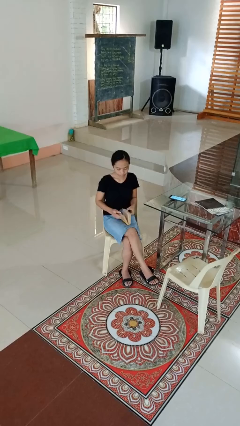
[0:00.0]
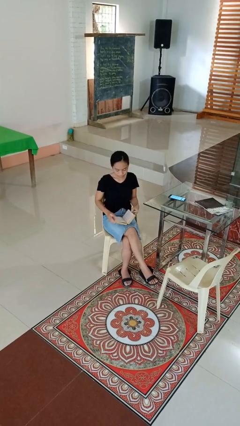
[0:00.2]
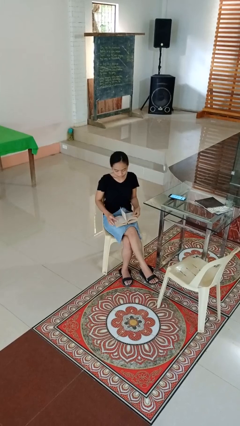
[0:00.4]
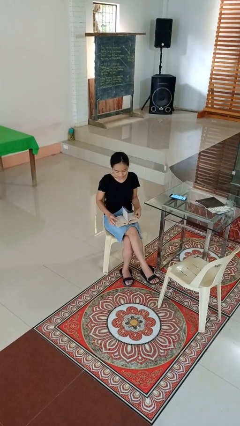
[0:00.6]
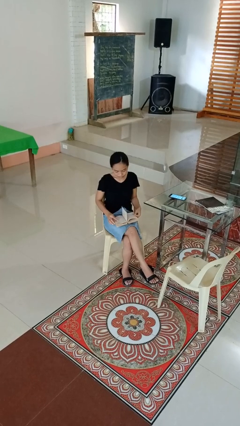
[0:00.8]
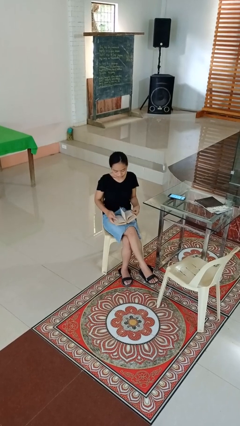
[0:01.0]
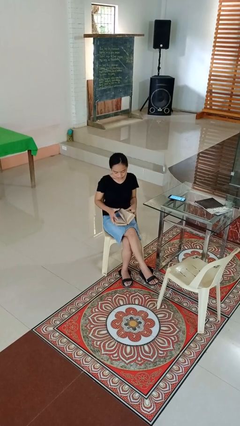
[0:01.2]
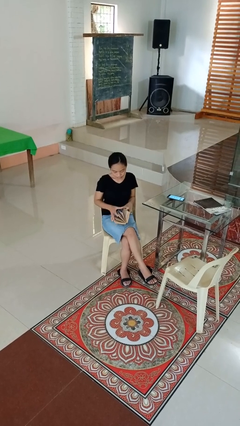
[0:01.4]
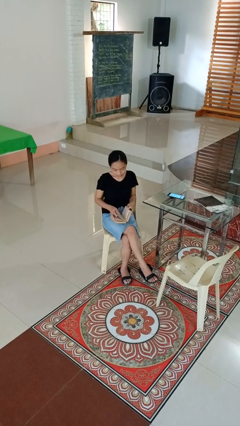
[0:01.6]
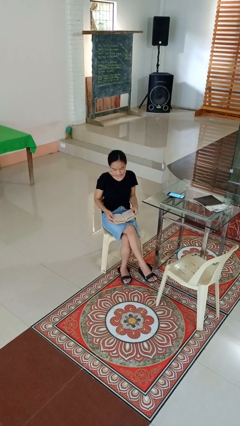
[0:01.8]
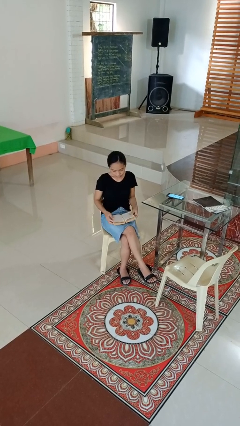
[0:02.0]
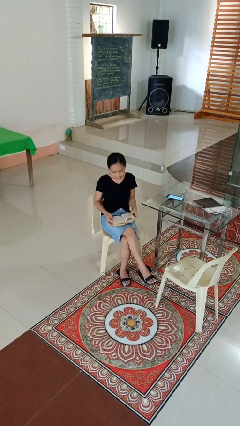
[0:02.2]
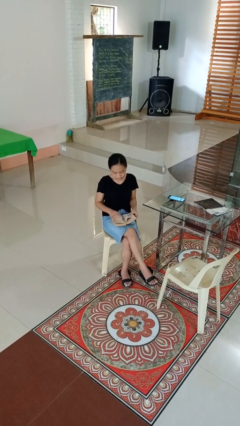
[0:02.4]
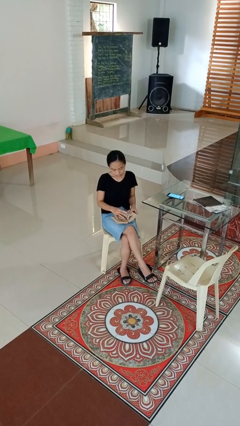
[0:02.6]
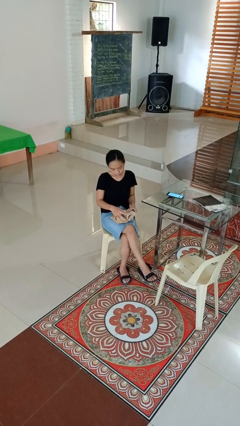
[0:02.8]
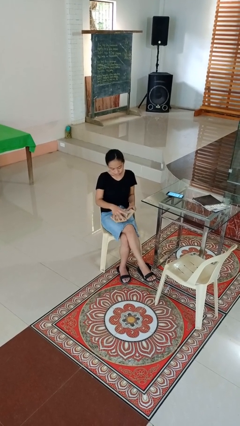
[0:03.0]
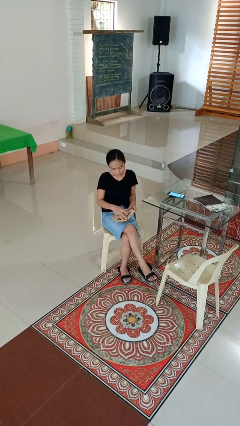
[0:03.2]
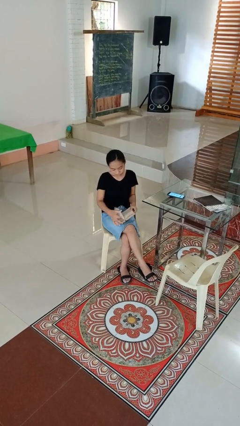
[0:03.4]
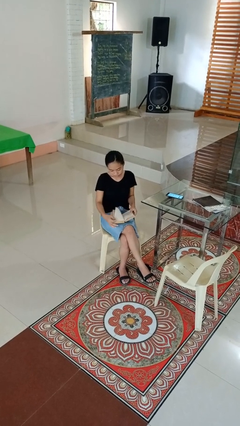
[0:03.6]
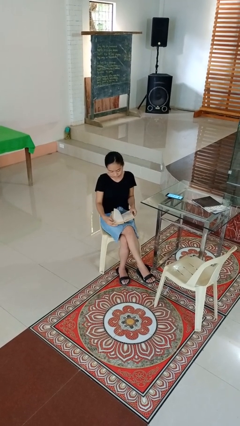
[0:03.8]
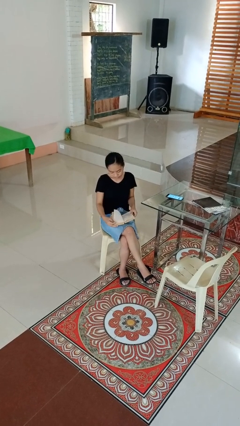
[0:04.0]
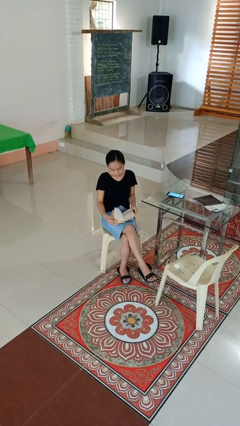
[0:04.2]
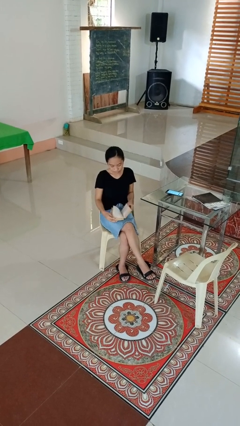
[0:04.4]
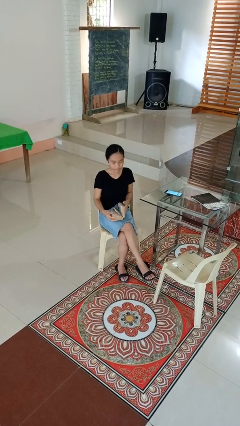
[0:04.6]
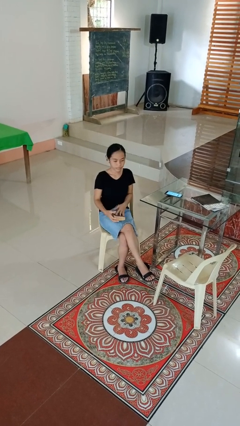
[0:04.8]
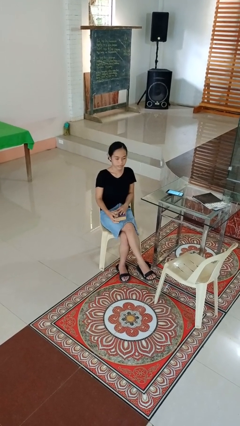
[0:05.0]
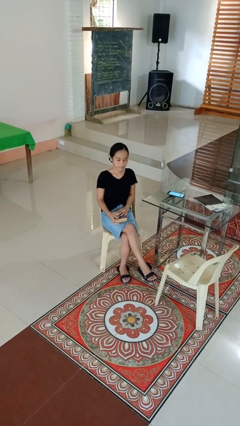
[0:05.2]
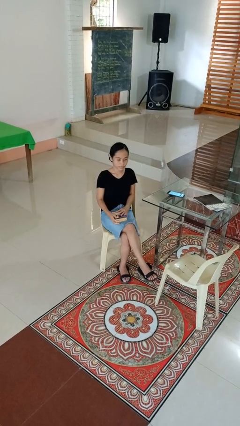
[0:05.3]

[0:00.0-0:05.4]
person reads book

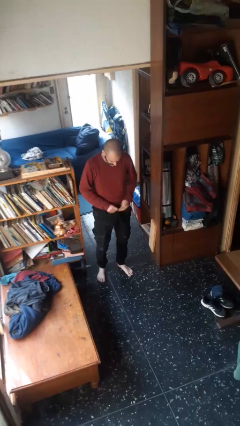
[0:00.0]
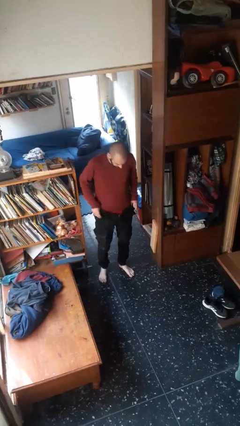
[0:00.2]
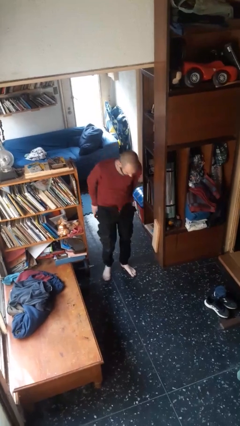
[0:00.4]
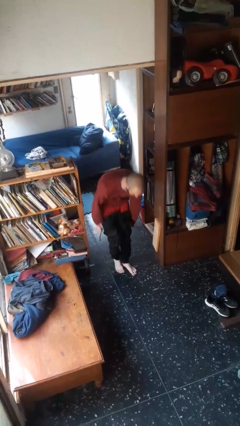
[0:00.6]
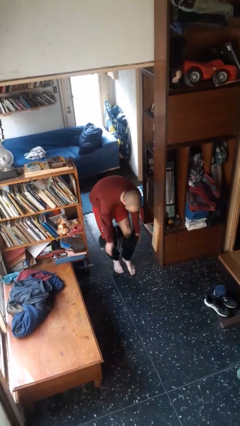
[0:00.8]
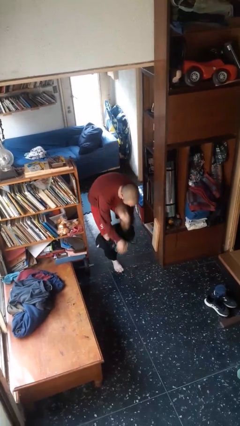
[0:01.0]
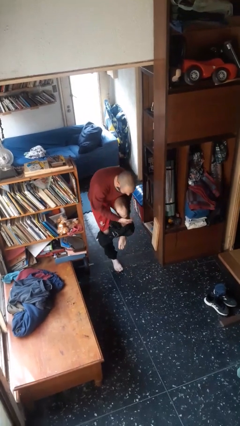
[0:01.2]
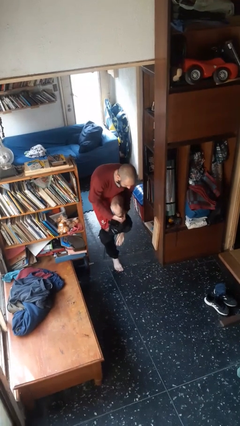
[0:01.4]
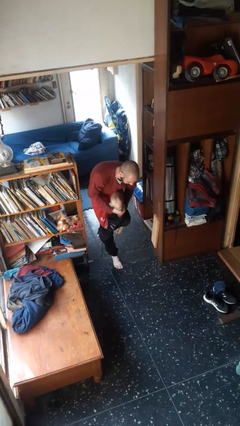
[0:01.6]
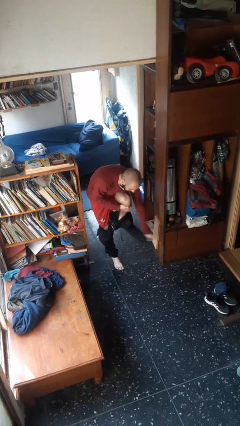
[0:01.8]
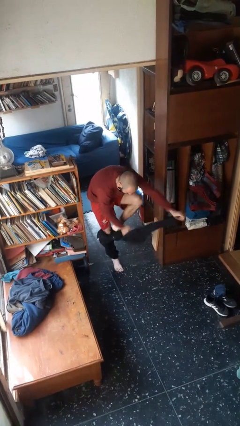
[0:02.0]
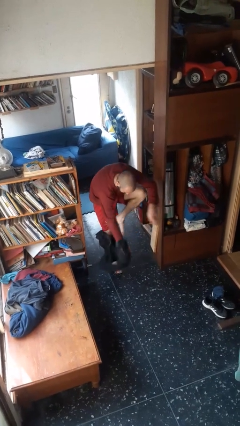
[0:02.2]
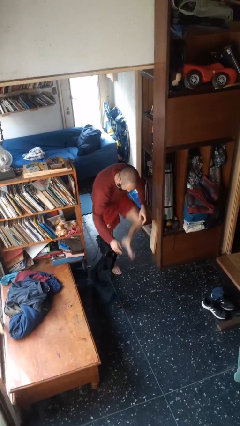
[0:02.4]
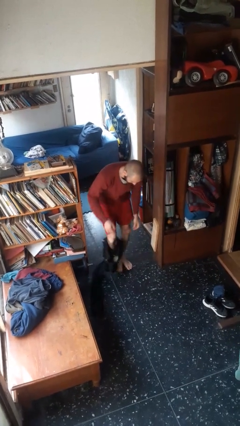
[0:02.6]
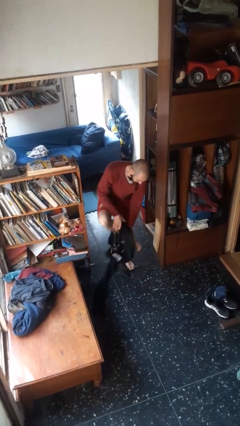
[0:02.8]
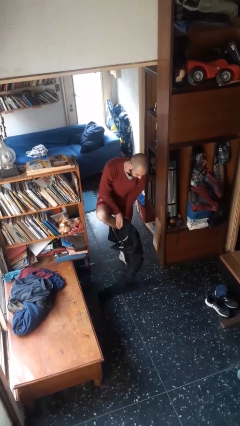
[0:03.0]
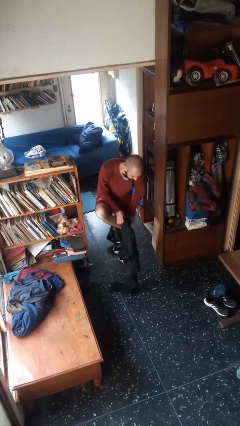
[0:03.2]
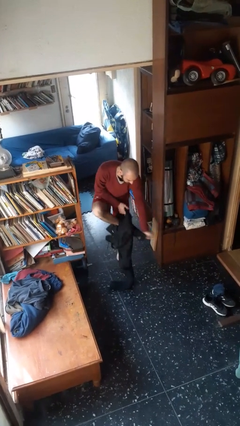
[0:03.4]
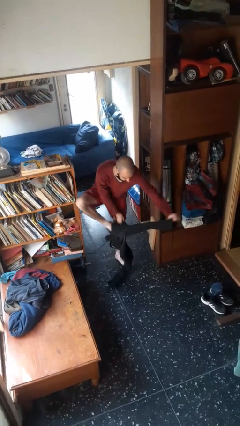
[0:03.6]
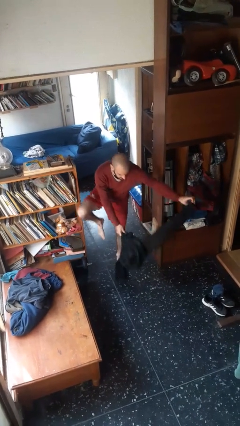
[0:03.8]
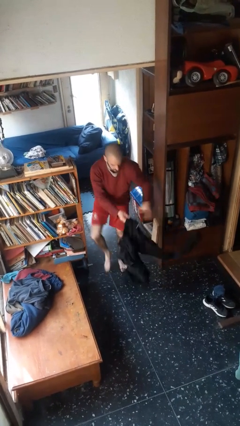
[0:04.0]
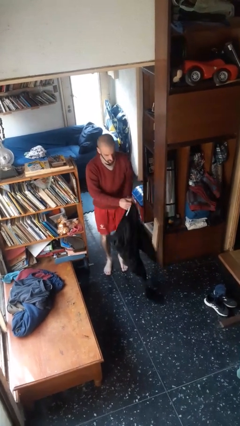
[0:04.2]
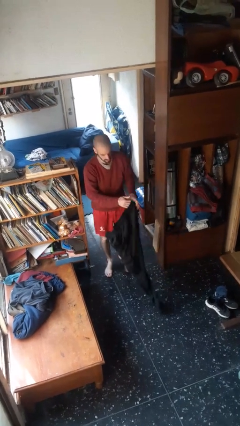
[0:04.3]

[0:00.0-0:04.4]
person takes off pants

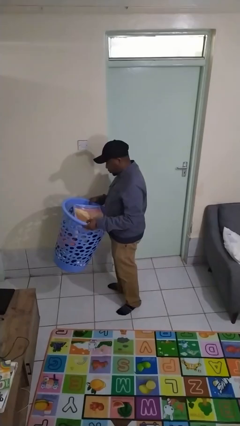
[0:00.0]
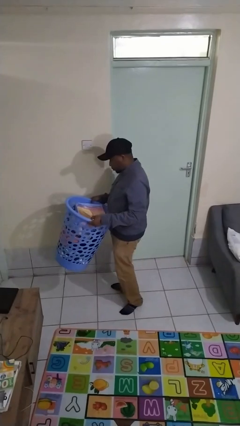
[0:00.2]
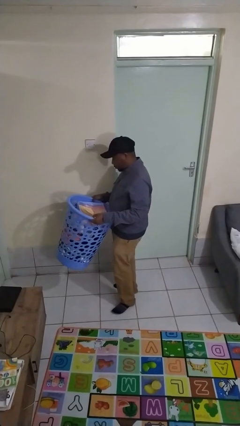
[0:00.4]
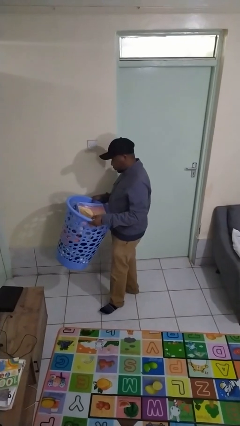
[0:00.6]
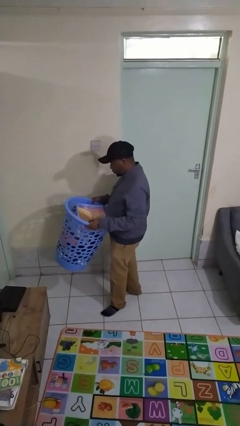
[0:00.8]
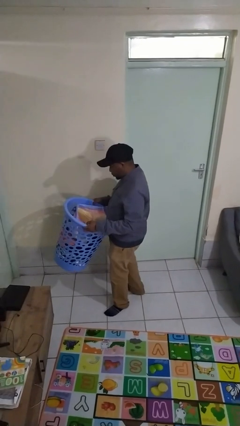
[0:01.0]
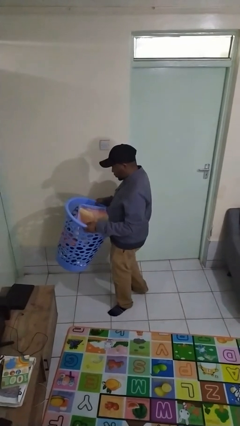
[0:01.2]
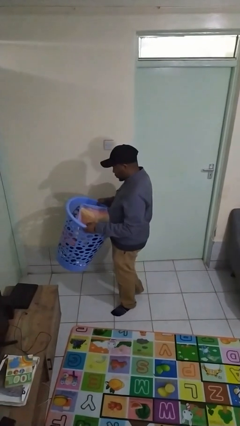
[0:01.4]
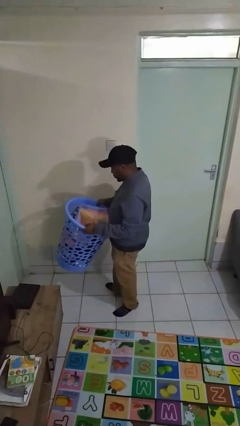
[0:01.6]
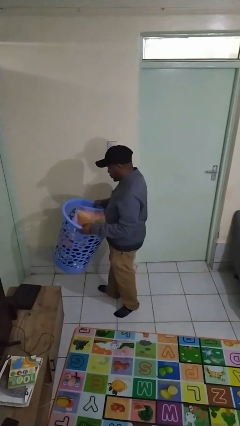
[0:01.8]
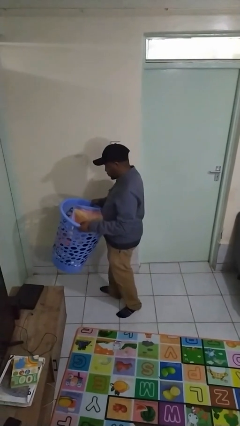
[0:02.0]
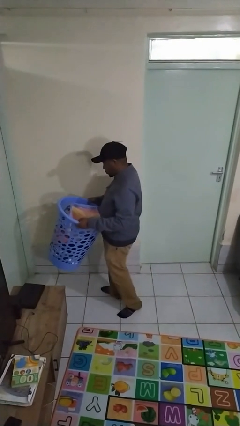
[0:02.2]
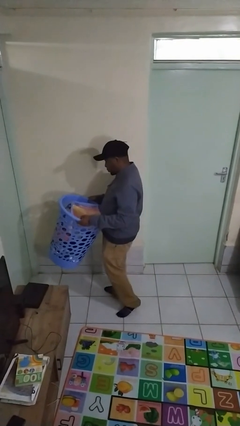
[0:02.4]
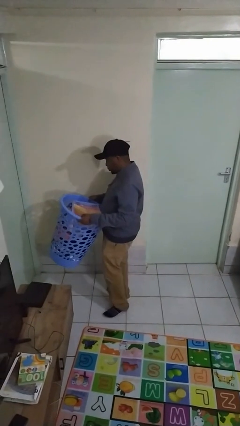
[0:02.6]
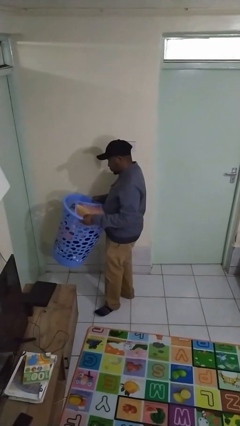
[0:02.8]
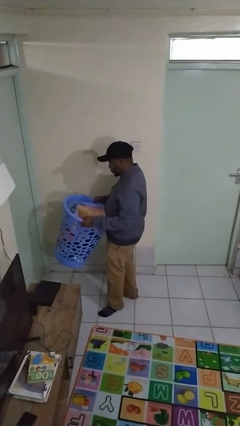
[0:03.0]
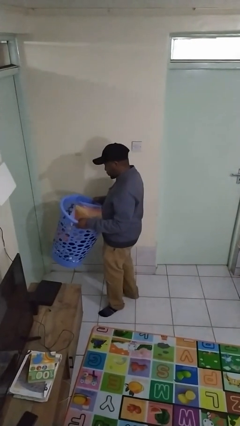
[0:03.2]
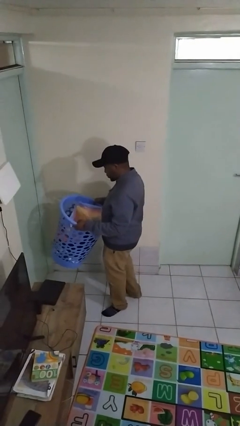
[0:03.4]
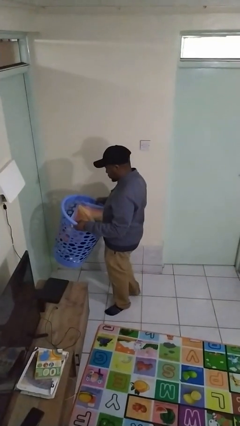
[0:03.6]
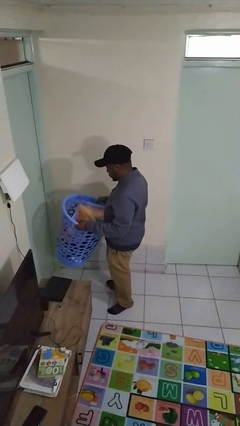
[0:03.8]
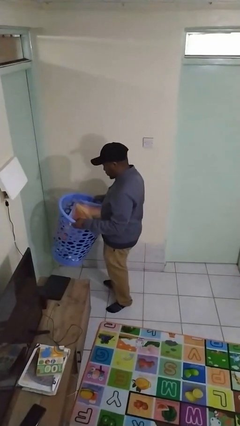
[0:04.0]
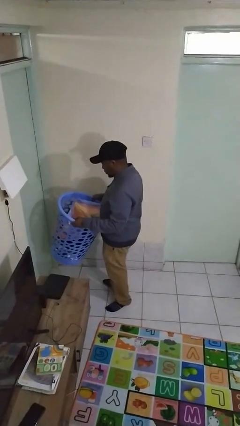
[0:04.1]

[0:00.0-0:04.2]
person carries laundry basket

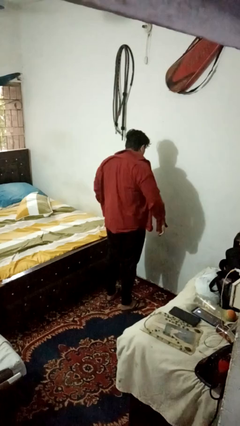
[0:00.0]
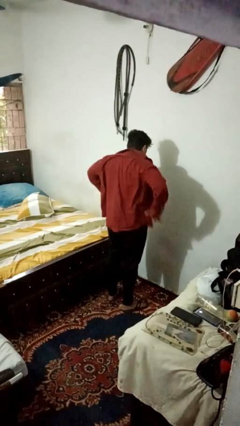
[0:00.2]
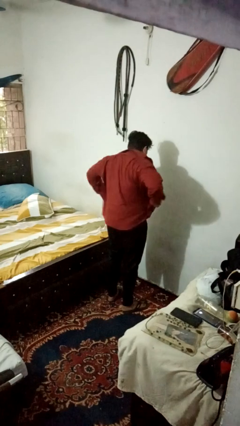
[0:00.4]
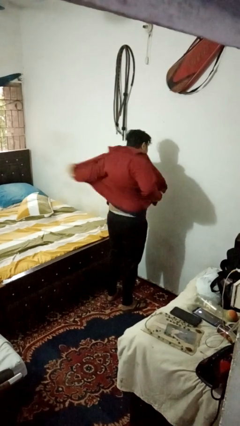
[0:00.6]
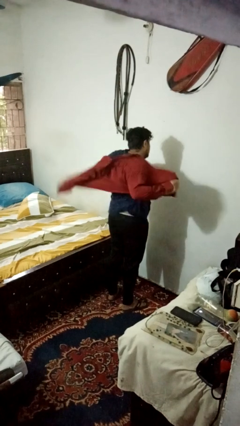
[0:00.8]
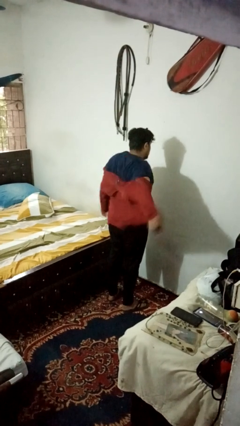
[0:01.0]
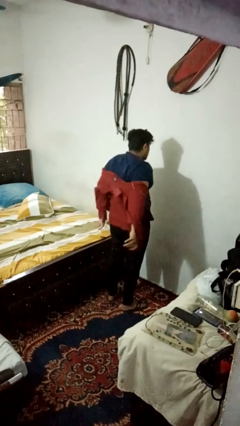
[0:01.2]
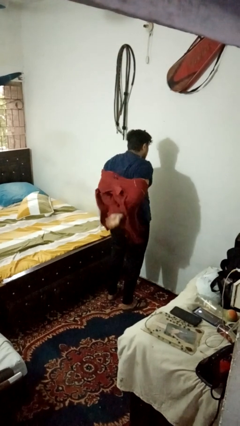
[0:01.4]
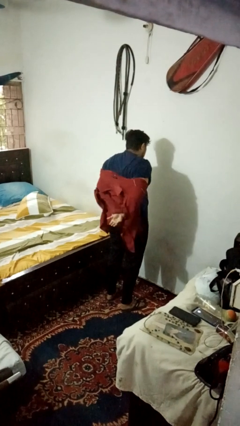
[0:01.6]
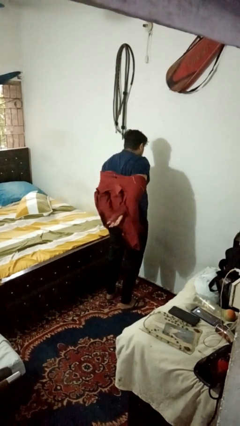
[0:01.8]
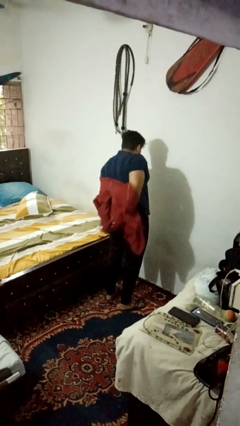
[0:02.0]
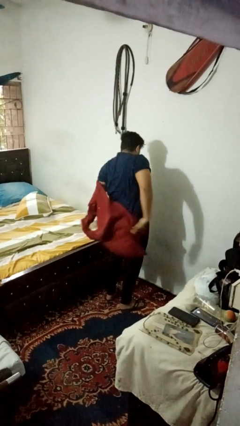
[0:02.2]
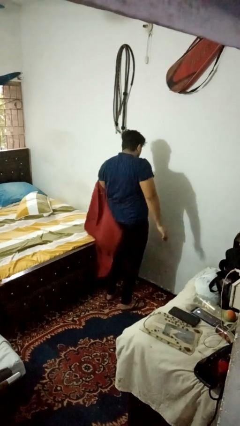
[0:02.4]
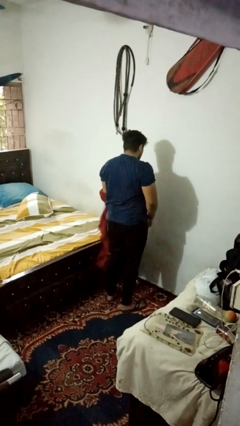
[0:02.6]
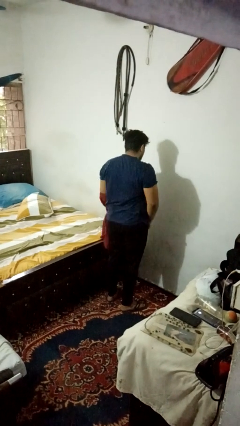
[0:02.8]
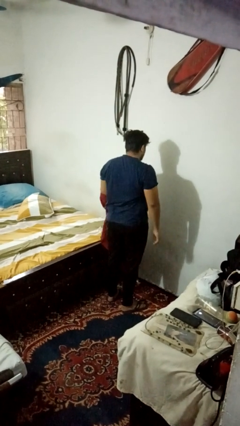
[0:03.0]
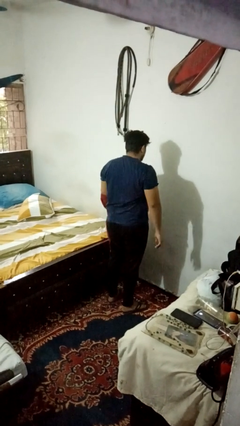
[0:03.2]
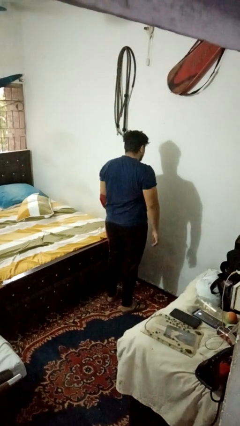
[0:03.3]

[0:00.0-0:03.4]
person takes off shirt
